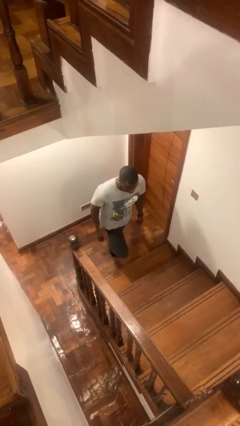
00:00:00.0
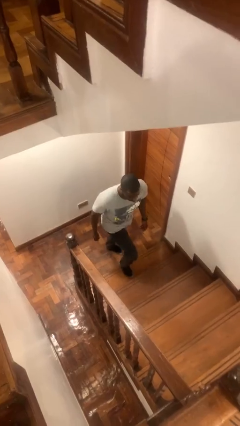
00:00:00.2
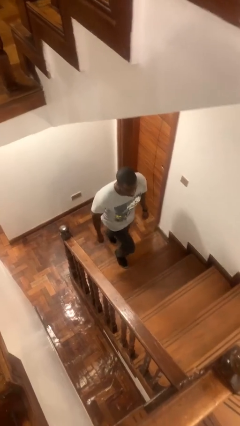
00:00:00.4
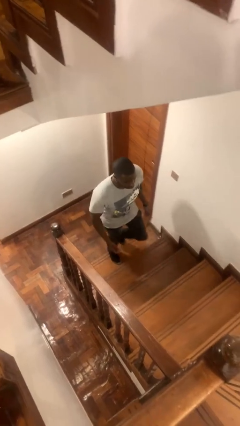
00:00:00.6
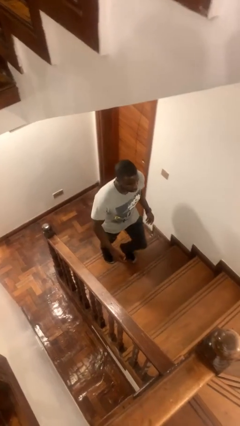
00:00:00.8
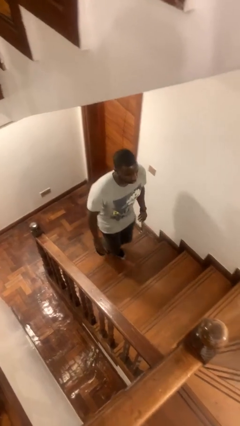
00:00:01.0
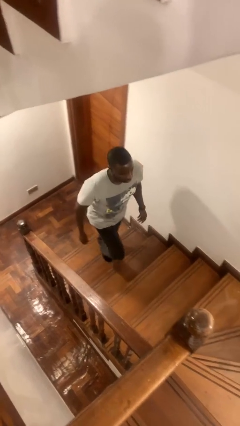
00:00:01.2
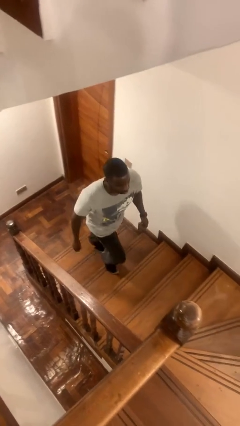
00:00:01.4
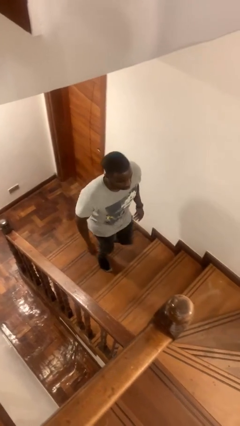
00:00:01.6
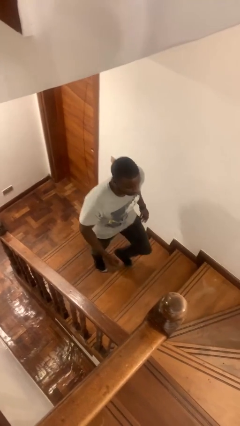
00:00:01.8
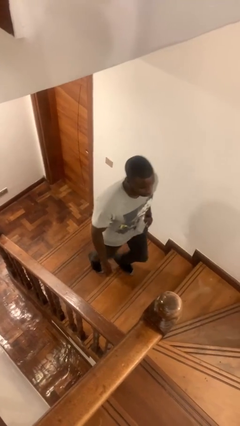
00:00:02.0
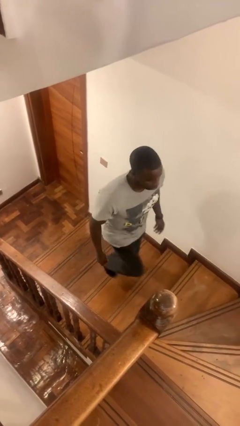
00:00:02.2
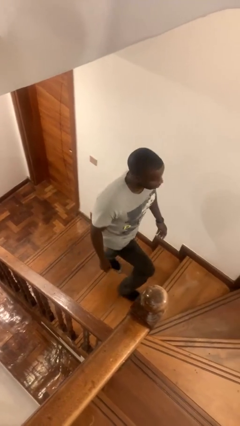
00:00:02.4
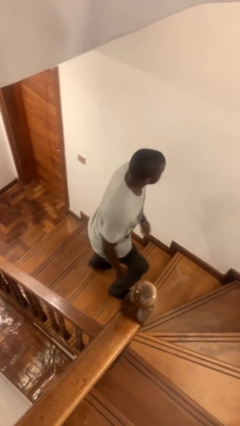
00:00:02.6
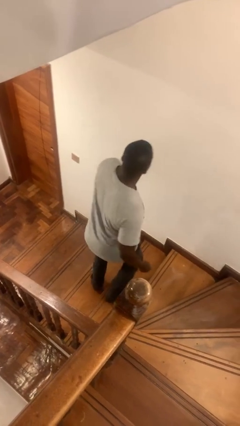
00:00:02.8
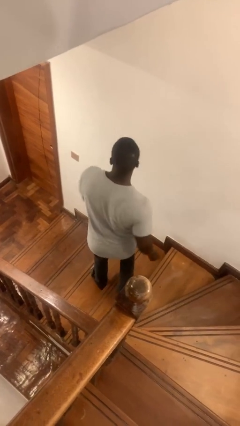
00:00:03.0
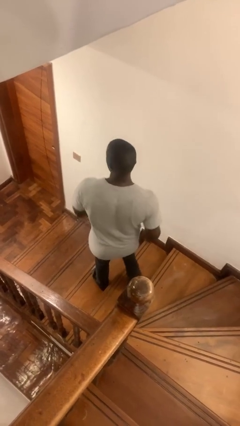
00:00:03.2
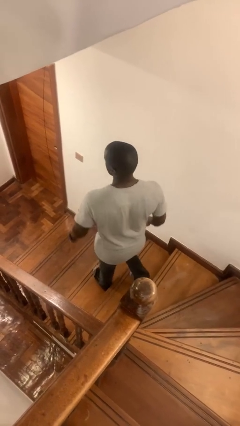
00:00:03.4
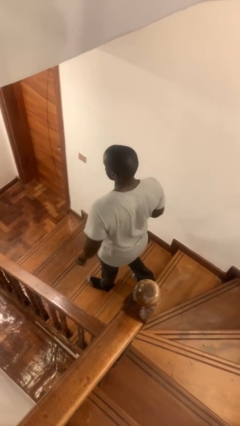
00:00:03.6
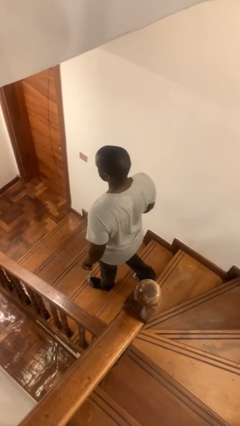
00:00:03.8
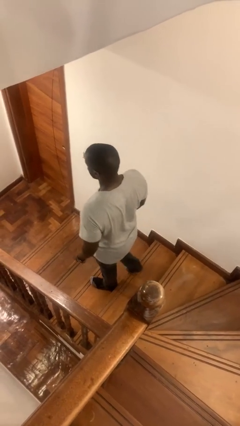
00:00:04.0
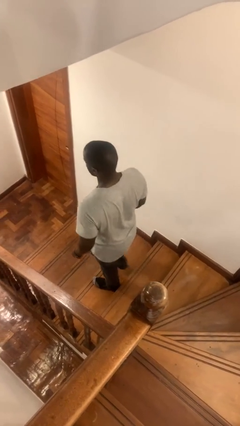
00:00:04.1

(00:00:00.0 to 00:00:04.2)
person climbs up stairs

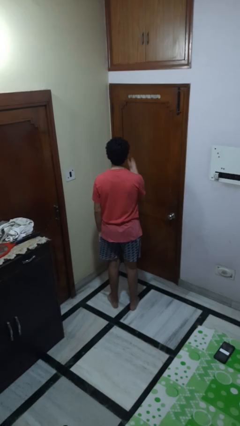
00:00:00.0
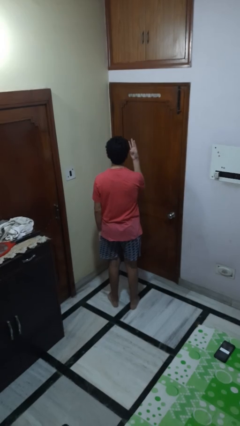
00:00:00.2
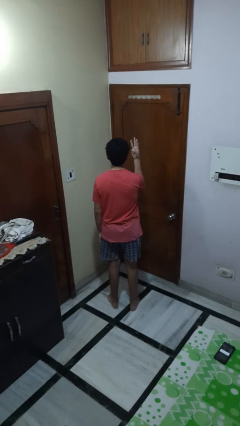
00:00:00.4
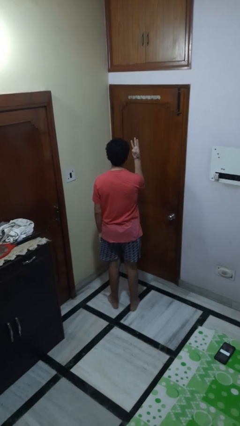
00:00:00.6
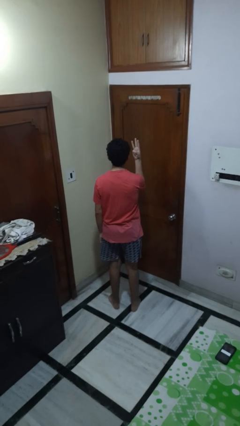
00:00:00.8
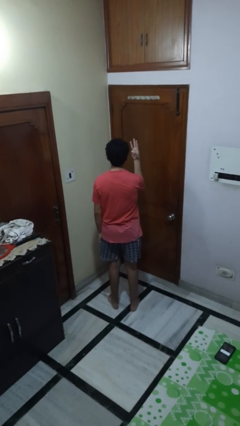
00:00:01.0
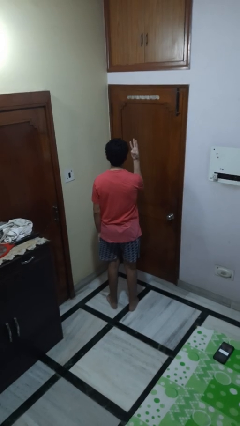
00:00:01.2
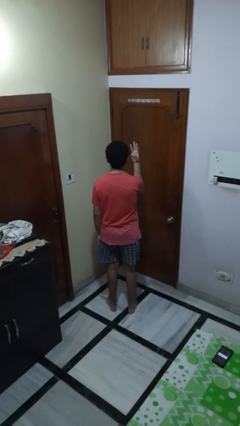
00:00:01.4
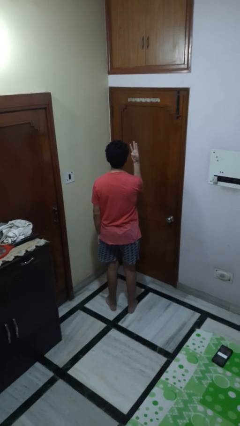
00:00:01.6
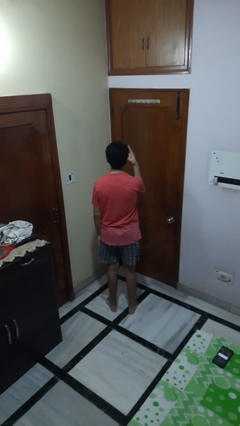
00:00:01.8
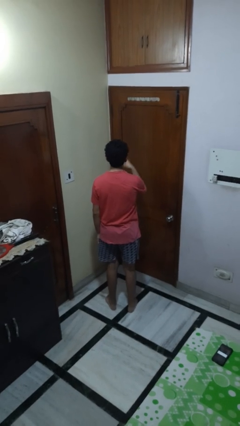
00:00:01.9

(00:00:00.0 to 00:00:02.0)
person gestures number three

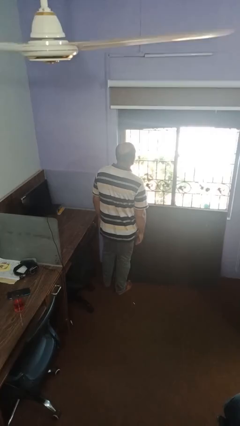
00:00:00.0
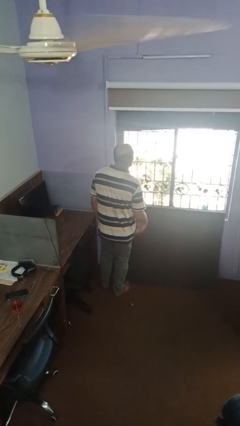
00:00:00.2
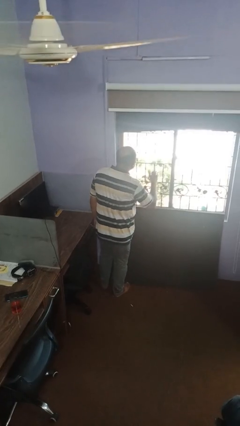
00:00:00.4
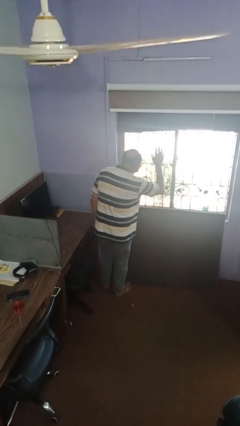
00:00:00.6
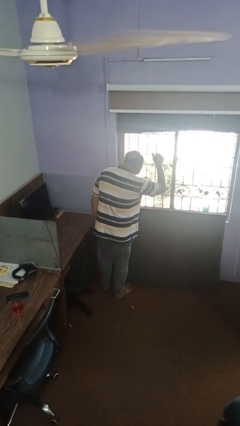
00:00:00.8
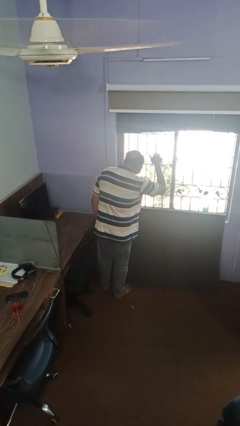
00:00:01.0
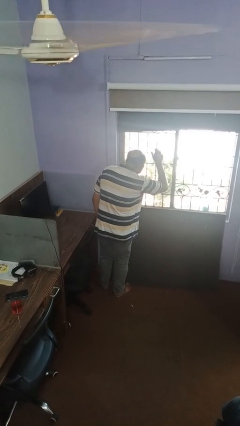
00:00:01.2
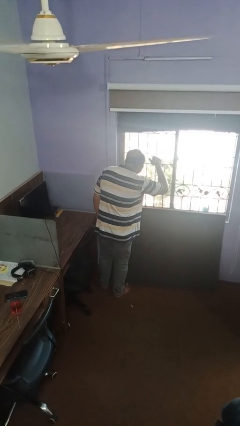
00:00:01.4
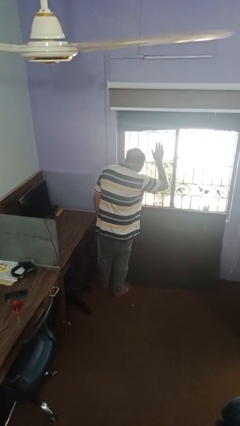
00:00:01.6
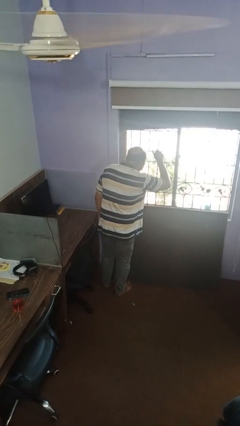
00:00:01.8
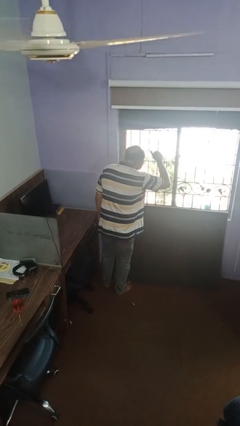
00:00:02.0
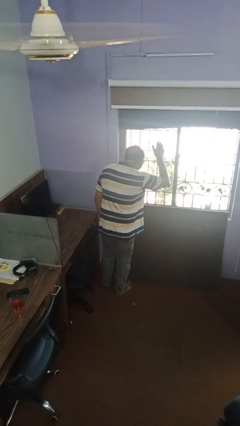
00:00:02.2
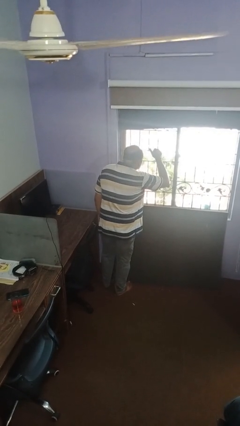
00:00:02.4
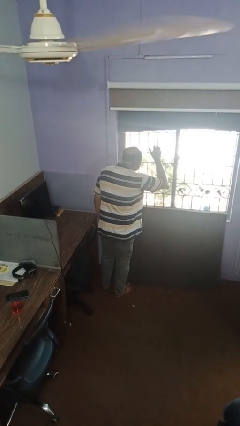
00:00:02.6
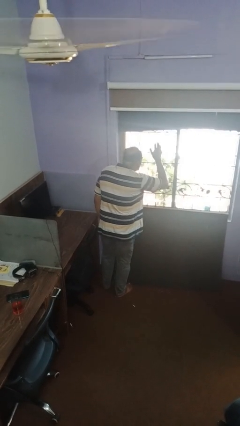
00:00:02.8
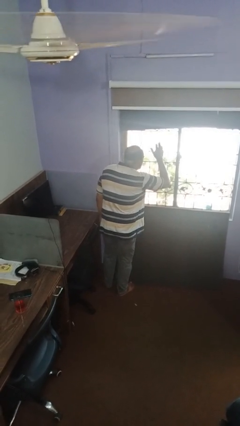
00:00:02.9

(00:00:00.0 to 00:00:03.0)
person gestures come here

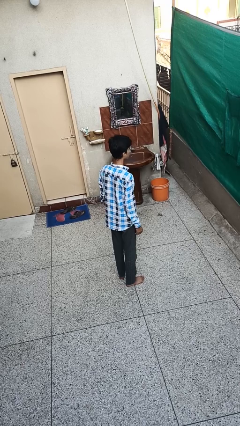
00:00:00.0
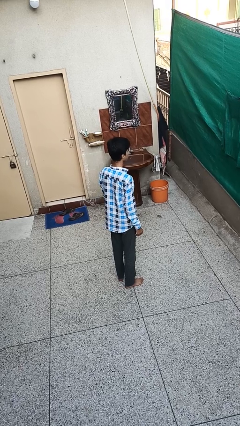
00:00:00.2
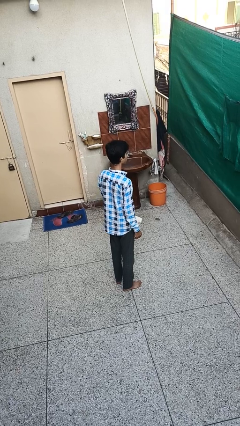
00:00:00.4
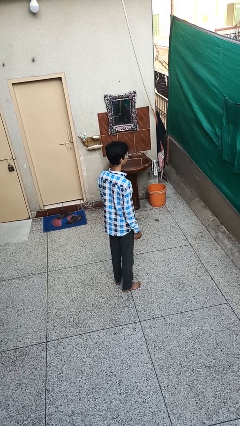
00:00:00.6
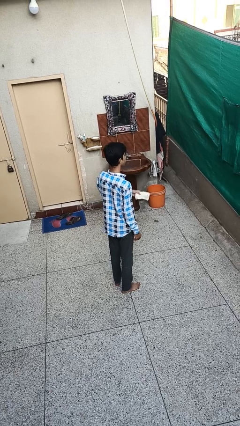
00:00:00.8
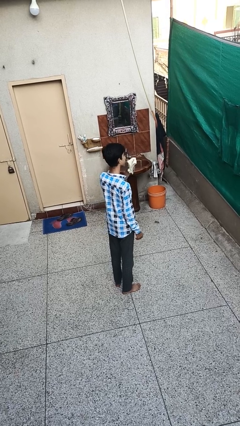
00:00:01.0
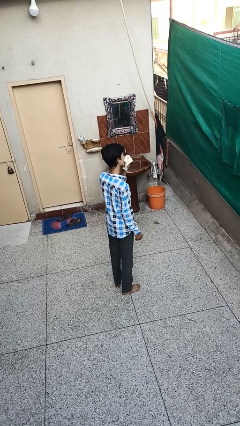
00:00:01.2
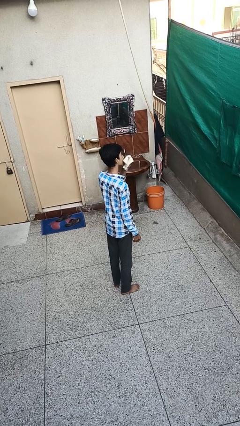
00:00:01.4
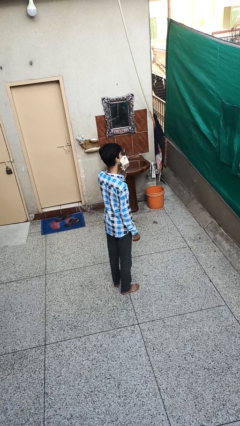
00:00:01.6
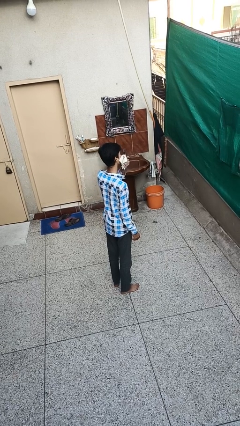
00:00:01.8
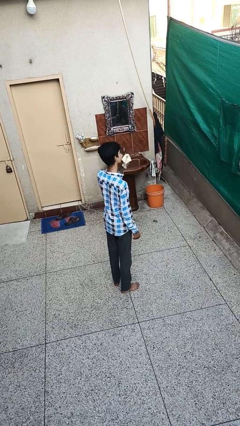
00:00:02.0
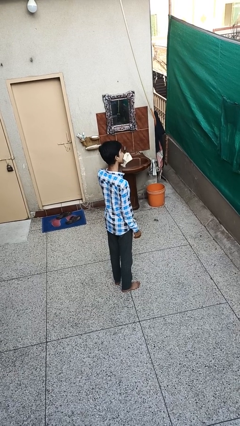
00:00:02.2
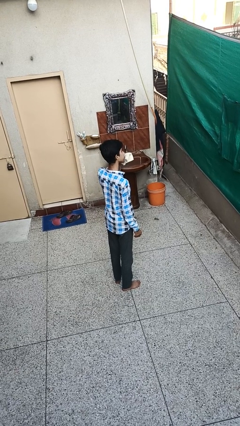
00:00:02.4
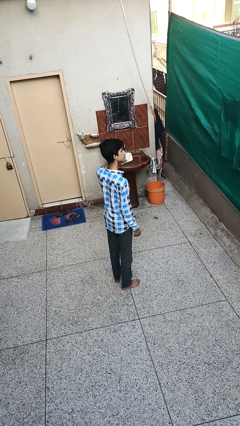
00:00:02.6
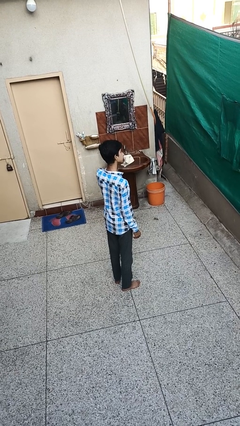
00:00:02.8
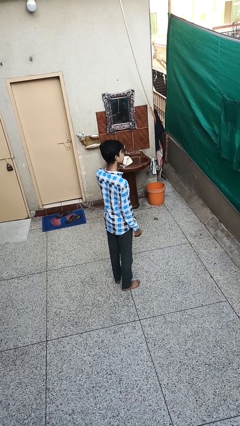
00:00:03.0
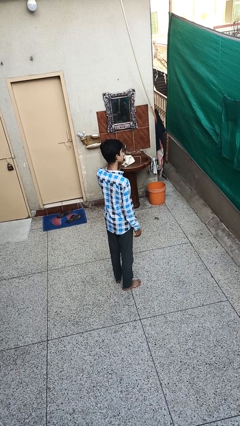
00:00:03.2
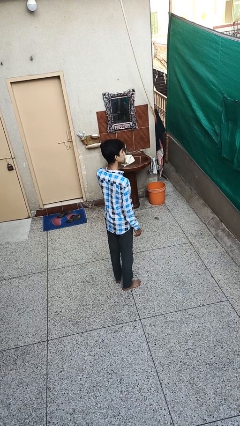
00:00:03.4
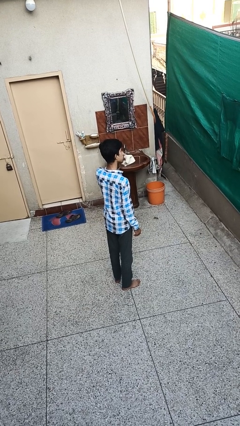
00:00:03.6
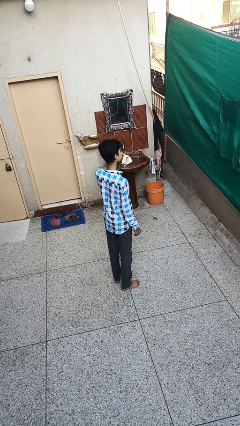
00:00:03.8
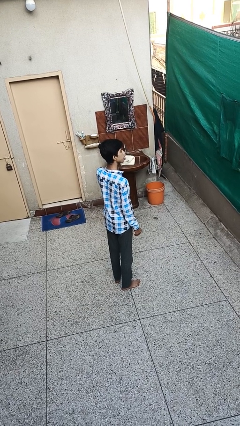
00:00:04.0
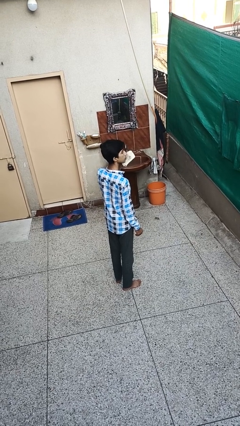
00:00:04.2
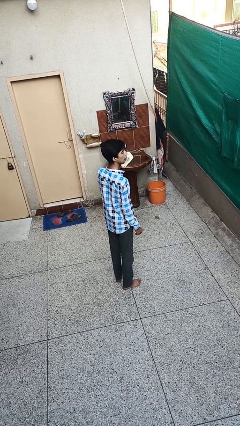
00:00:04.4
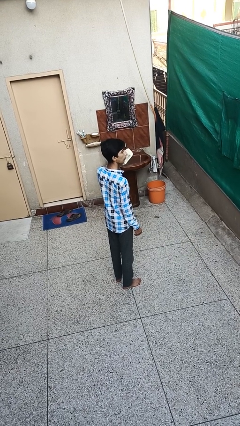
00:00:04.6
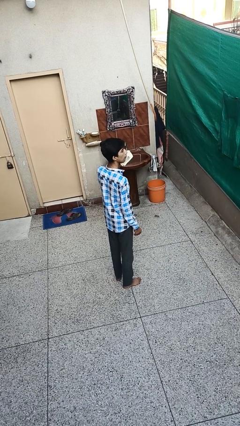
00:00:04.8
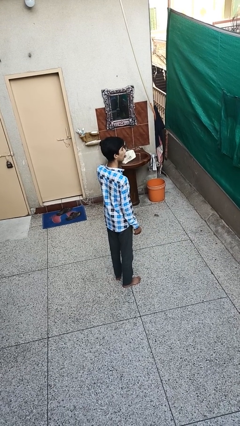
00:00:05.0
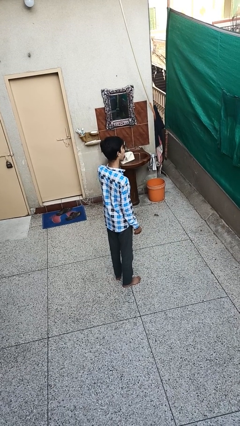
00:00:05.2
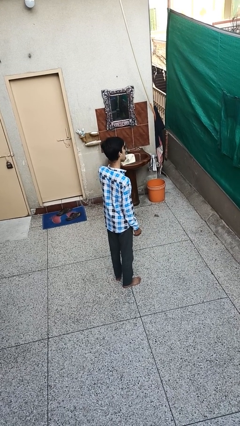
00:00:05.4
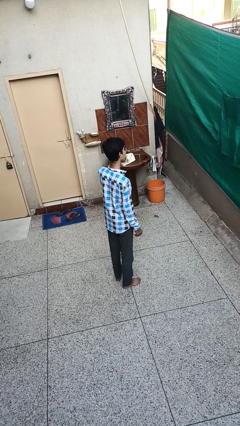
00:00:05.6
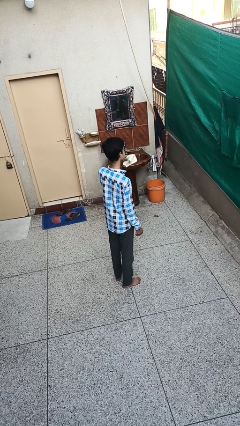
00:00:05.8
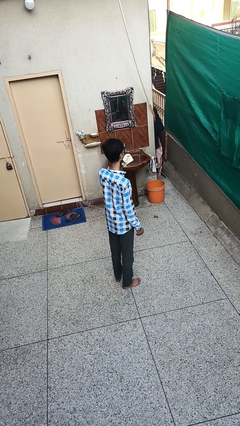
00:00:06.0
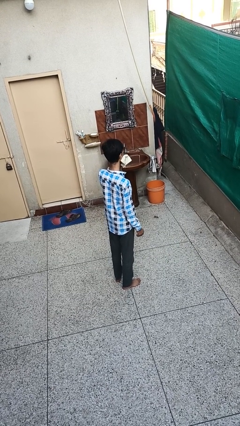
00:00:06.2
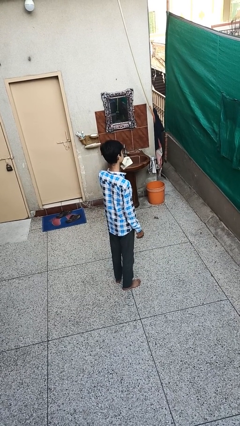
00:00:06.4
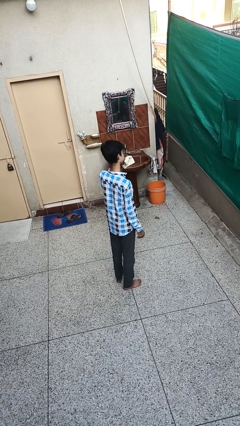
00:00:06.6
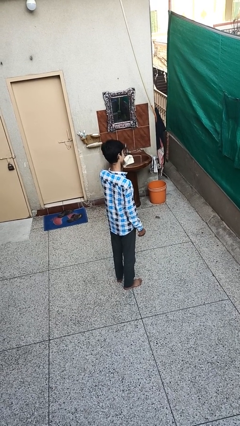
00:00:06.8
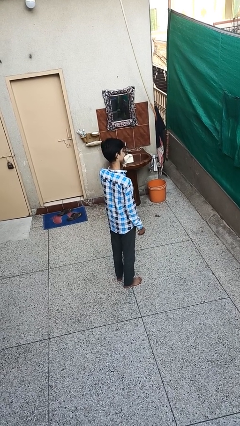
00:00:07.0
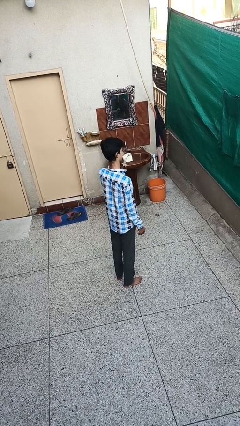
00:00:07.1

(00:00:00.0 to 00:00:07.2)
person wipes mouth with napkin

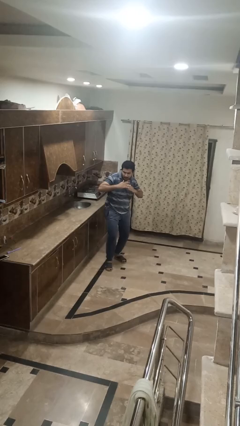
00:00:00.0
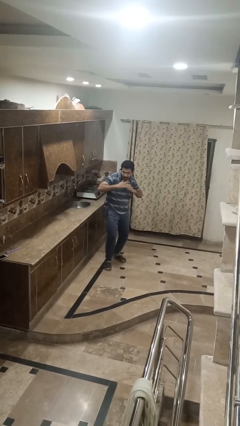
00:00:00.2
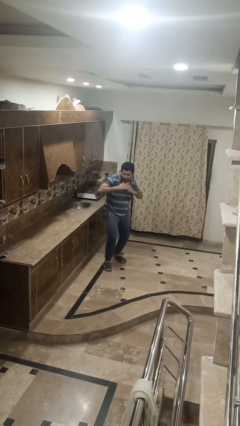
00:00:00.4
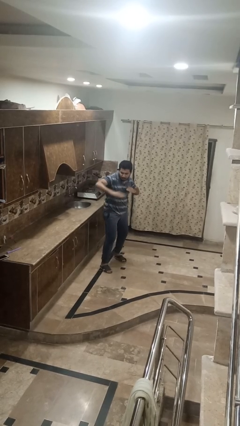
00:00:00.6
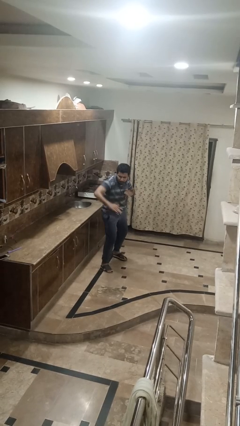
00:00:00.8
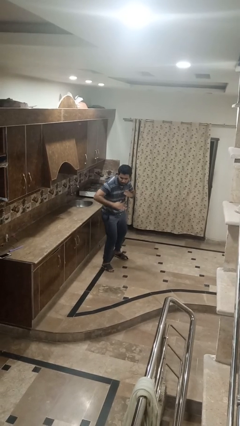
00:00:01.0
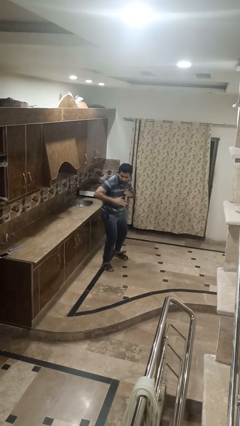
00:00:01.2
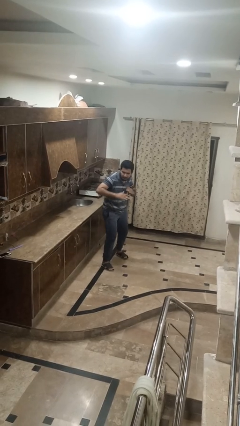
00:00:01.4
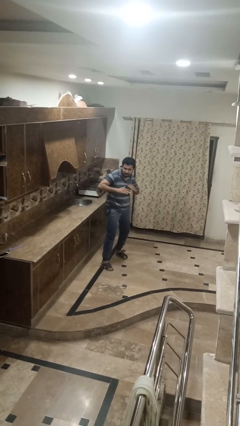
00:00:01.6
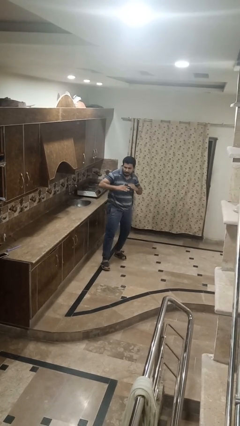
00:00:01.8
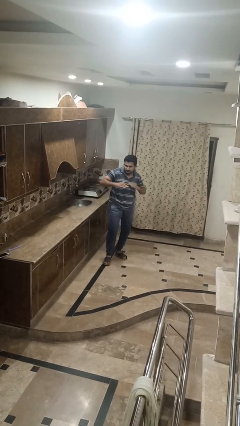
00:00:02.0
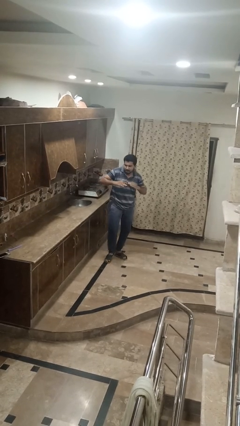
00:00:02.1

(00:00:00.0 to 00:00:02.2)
person karate chop
